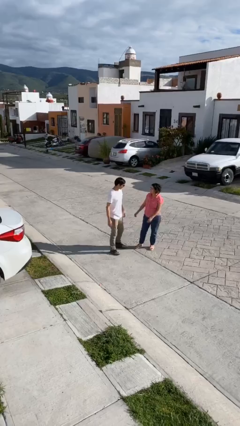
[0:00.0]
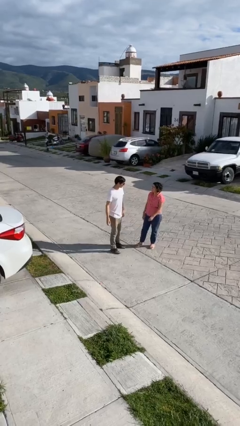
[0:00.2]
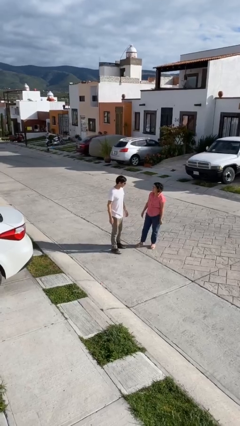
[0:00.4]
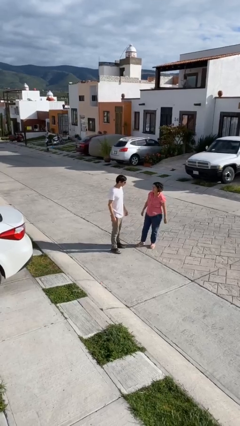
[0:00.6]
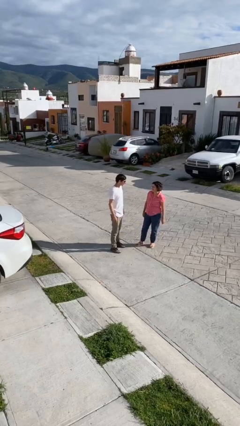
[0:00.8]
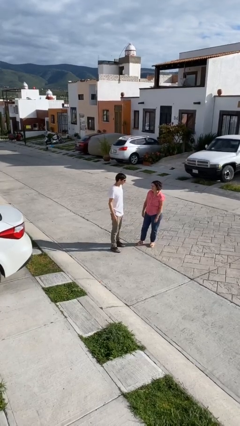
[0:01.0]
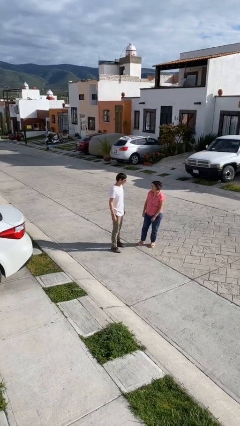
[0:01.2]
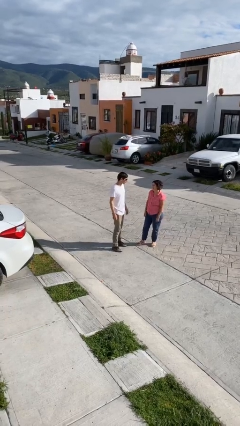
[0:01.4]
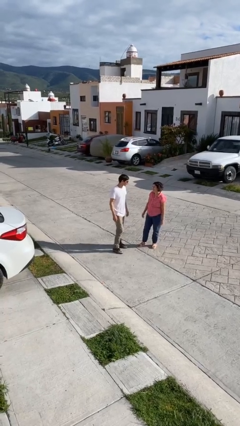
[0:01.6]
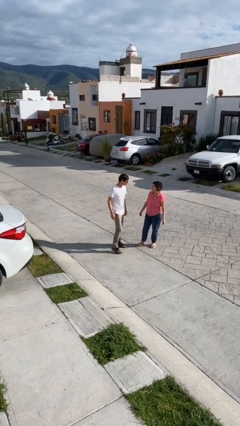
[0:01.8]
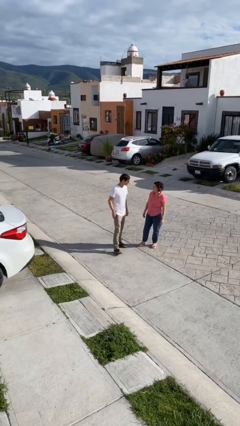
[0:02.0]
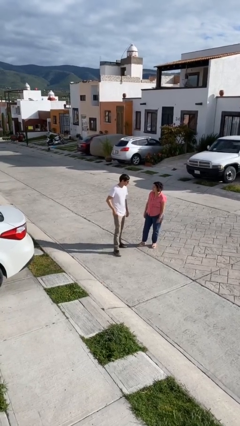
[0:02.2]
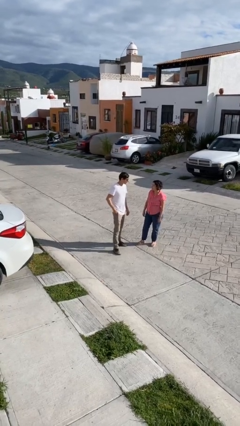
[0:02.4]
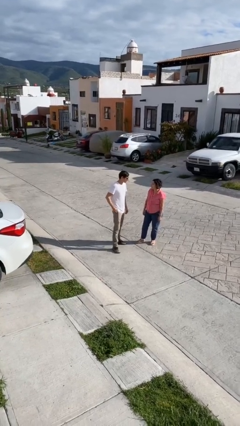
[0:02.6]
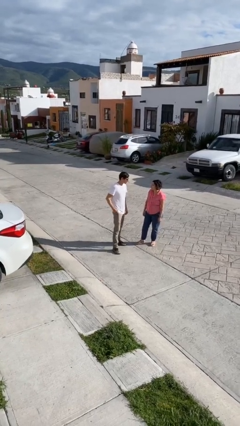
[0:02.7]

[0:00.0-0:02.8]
person talks to person

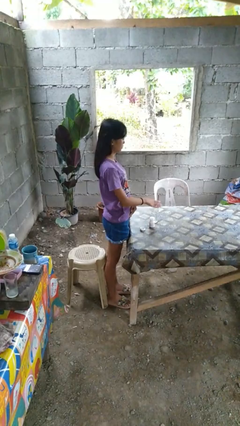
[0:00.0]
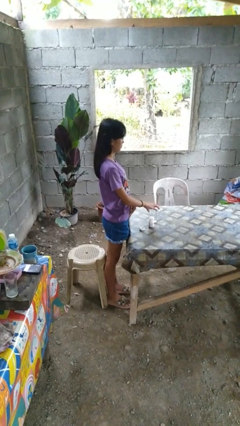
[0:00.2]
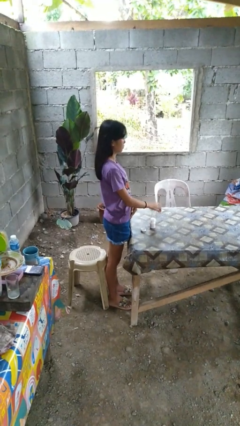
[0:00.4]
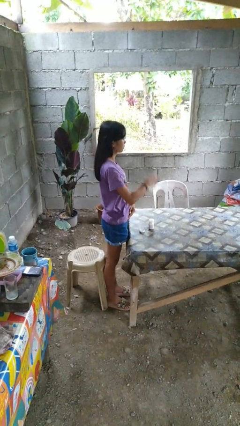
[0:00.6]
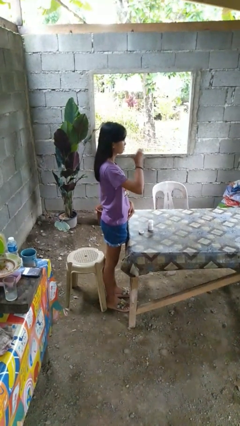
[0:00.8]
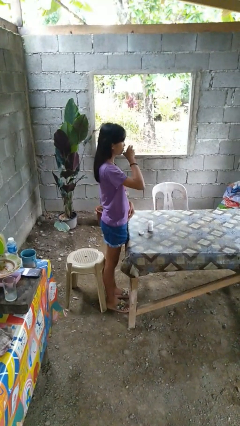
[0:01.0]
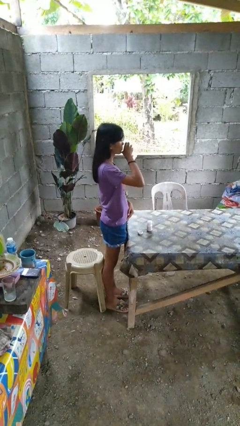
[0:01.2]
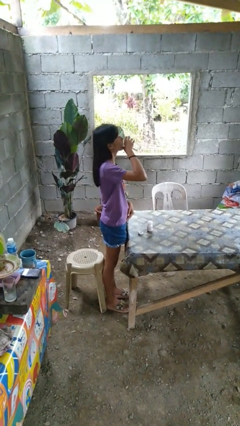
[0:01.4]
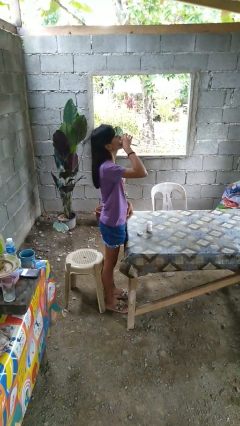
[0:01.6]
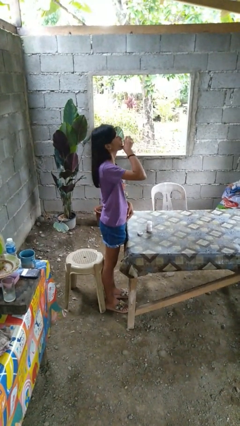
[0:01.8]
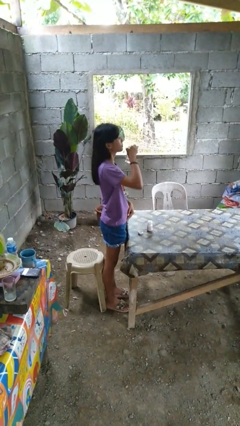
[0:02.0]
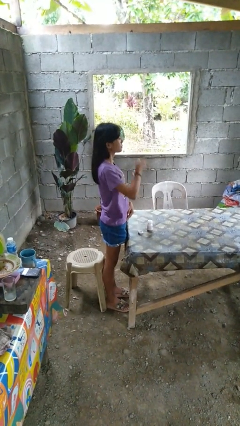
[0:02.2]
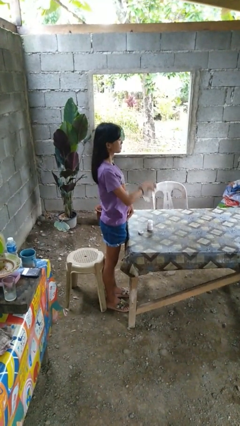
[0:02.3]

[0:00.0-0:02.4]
person drinks from cup

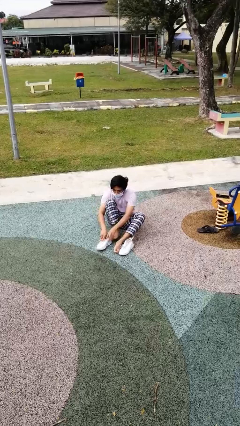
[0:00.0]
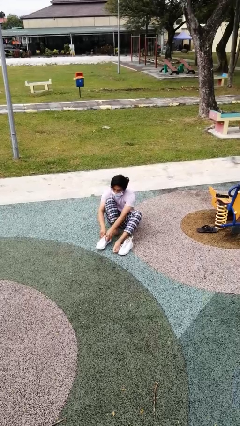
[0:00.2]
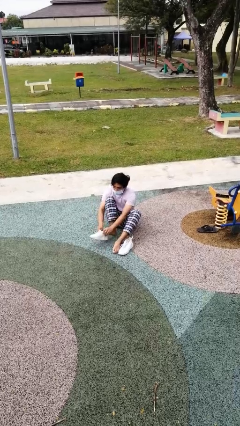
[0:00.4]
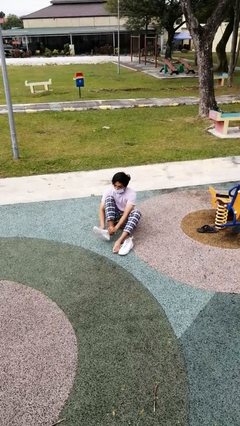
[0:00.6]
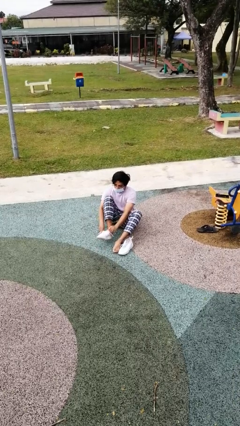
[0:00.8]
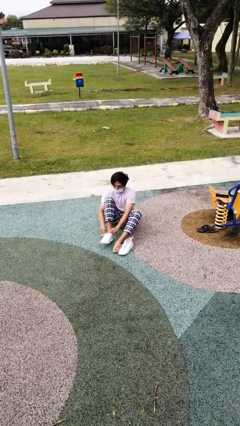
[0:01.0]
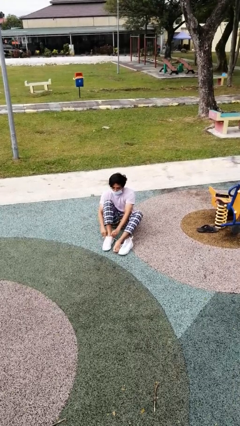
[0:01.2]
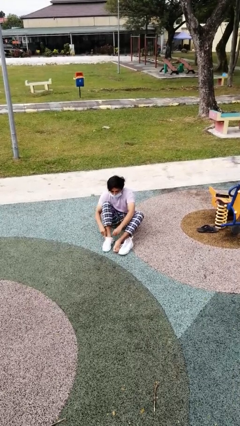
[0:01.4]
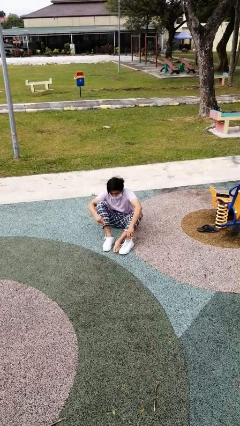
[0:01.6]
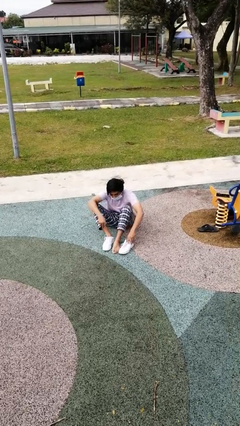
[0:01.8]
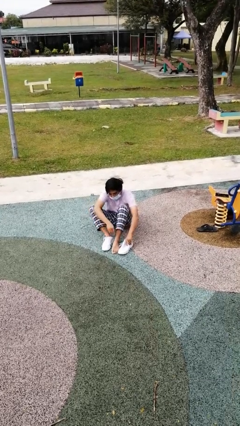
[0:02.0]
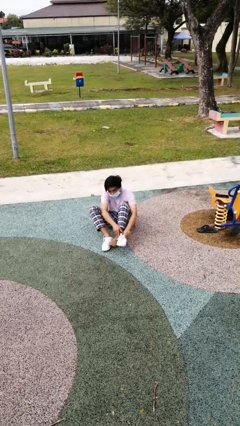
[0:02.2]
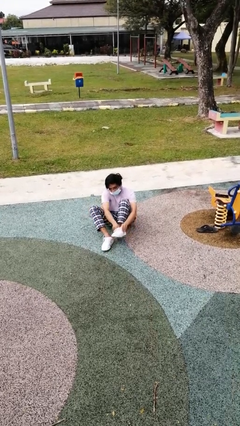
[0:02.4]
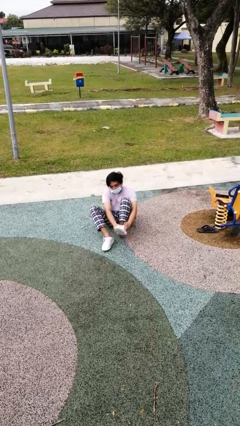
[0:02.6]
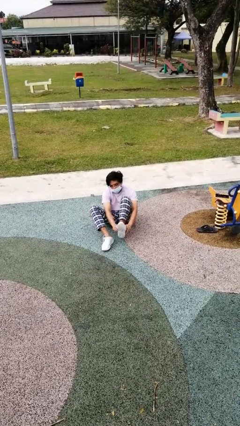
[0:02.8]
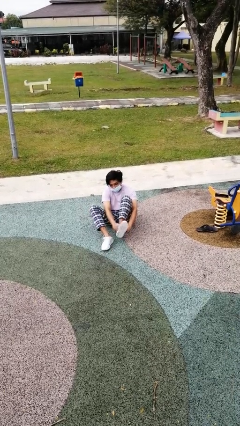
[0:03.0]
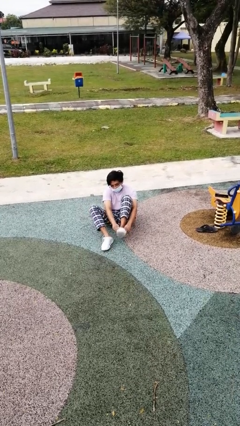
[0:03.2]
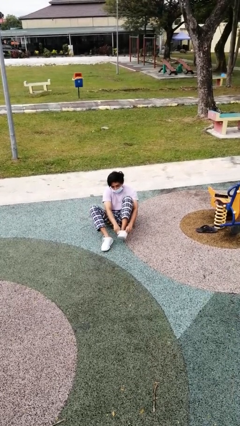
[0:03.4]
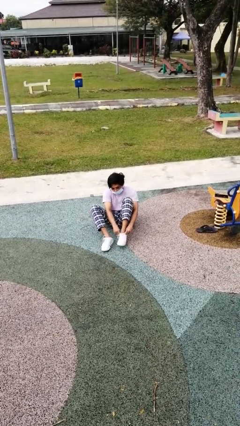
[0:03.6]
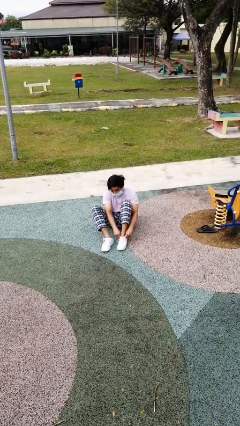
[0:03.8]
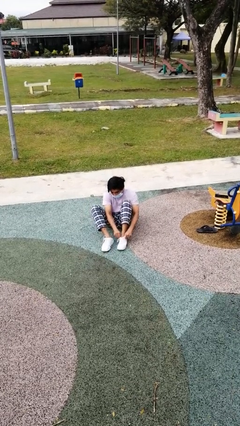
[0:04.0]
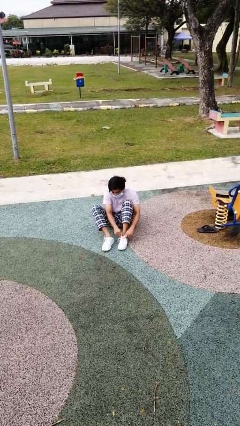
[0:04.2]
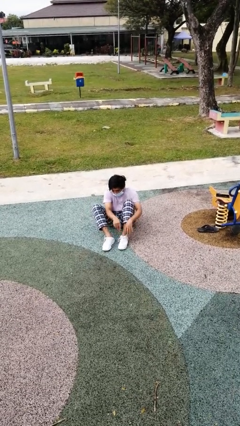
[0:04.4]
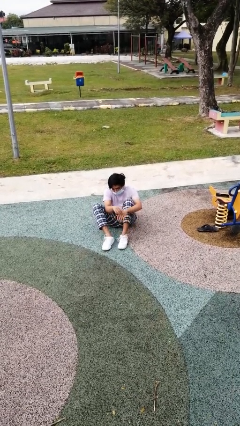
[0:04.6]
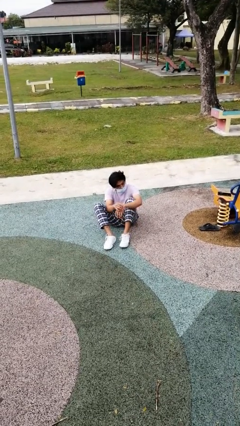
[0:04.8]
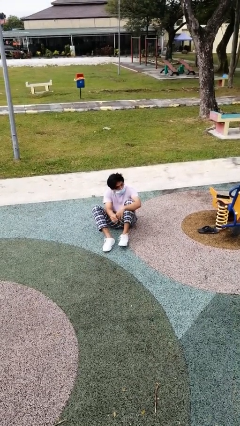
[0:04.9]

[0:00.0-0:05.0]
person puts on shoes

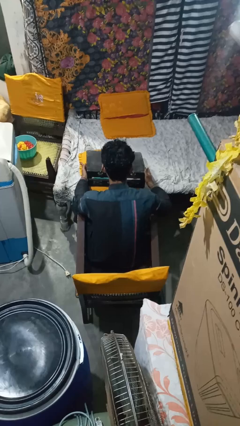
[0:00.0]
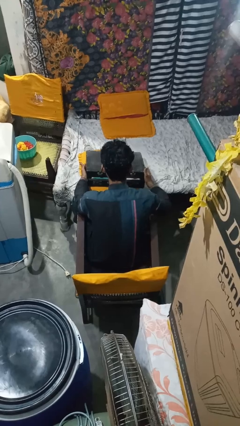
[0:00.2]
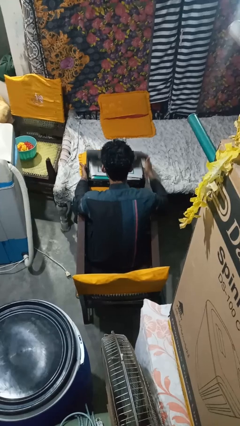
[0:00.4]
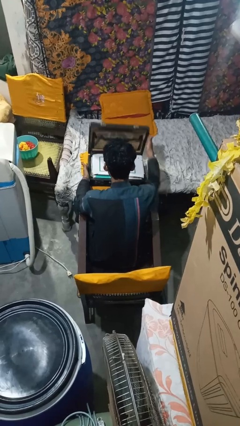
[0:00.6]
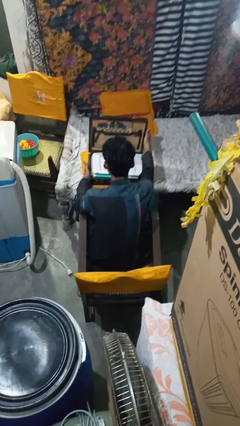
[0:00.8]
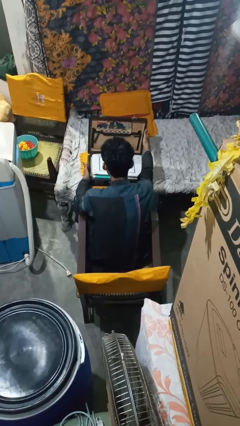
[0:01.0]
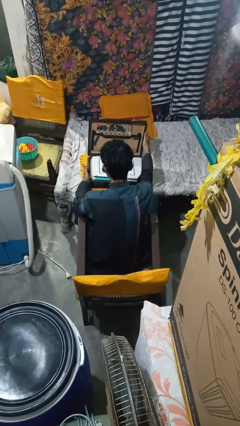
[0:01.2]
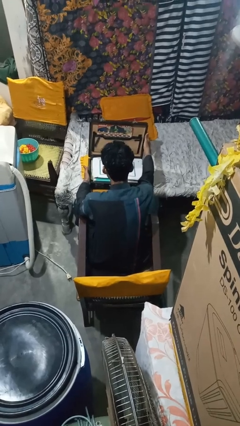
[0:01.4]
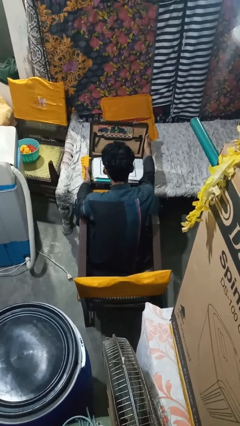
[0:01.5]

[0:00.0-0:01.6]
person opens suitcase

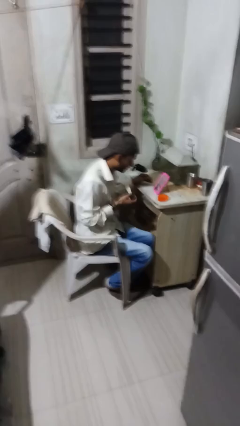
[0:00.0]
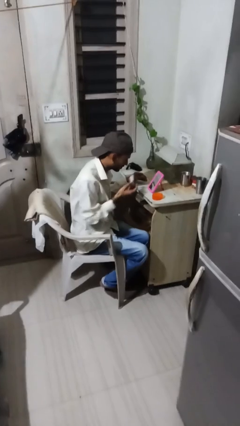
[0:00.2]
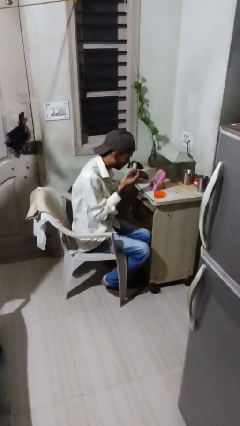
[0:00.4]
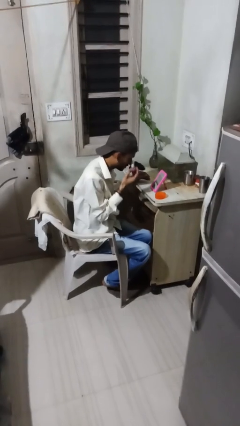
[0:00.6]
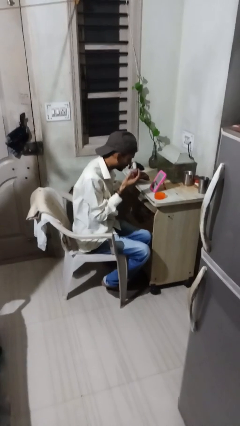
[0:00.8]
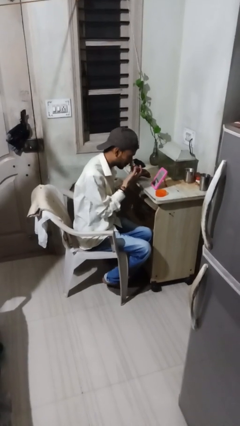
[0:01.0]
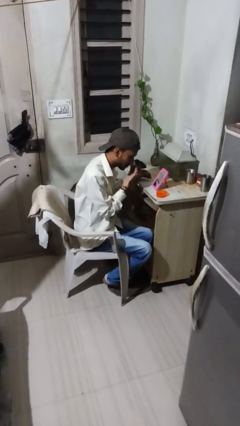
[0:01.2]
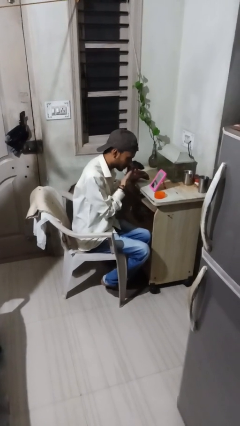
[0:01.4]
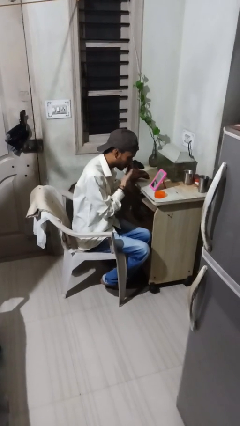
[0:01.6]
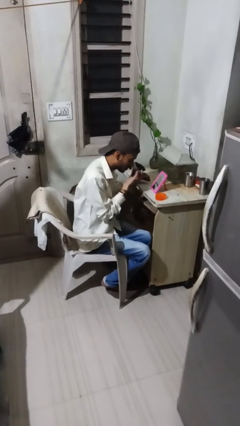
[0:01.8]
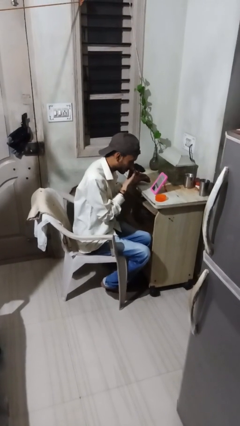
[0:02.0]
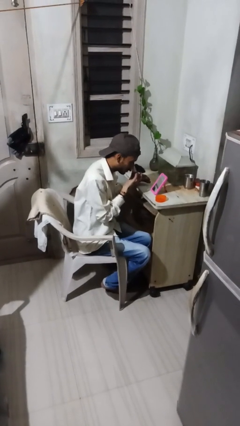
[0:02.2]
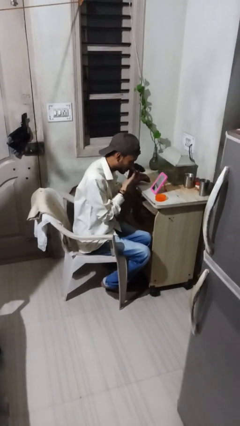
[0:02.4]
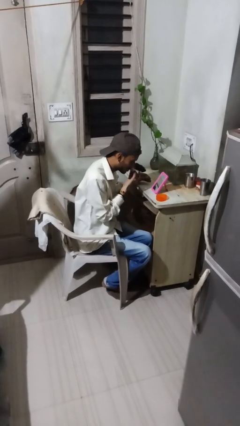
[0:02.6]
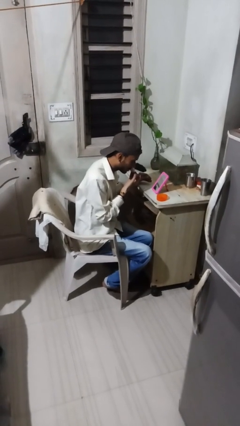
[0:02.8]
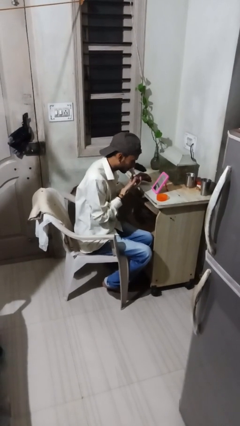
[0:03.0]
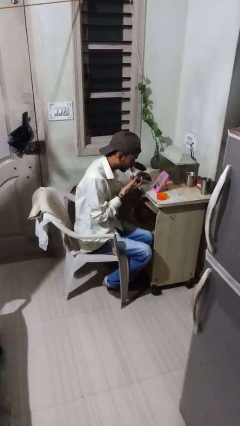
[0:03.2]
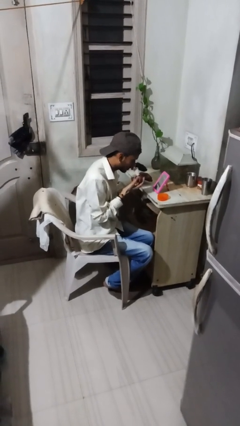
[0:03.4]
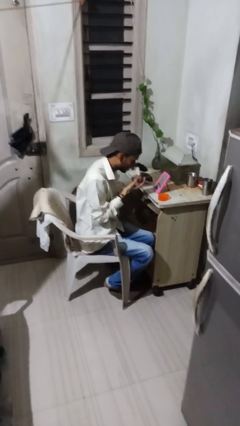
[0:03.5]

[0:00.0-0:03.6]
person applies foundation makeup

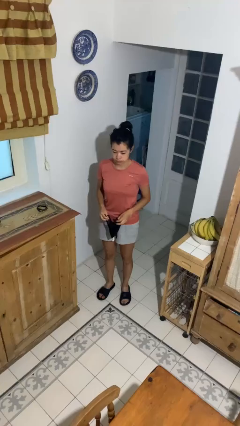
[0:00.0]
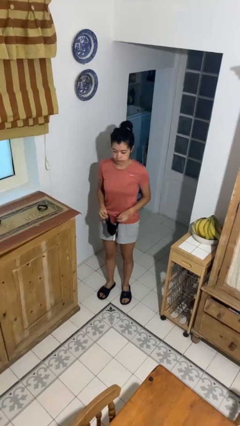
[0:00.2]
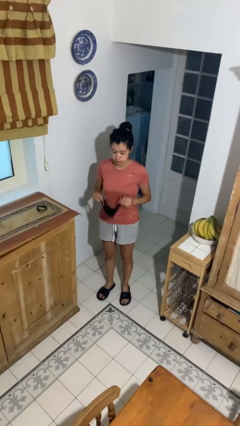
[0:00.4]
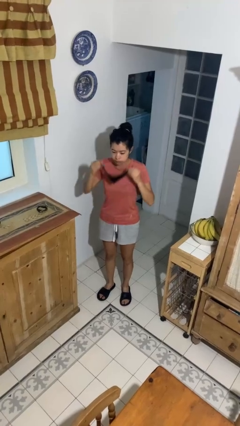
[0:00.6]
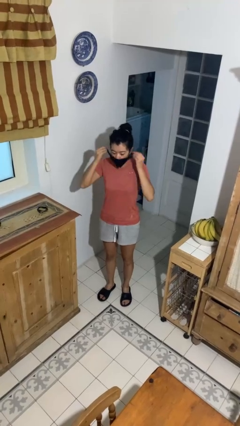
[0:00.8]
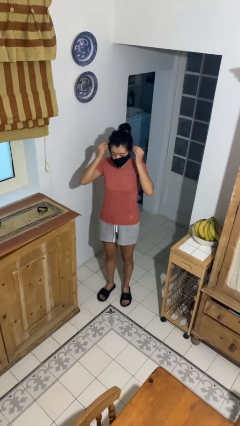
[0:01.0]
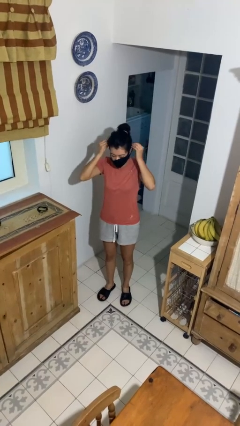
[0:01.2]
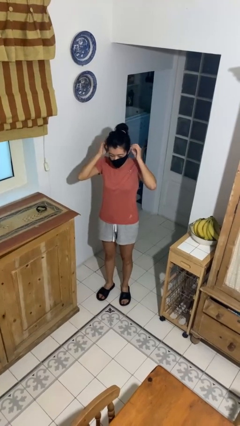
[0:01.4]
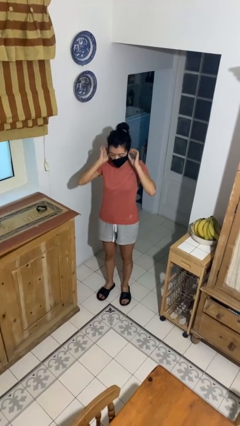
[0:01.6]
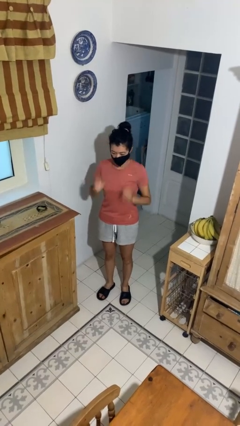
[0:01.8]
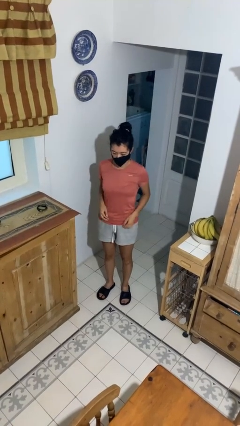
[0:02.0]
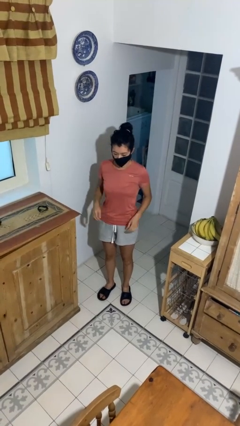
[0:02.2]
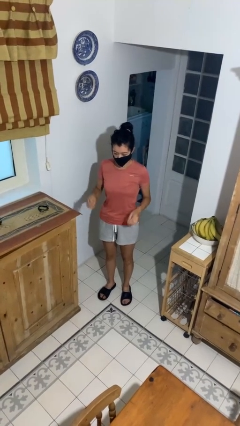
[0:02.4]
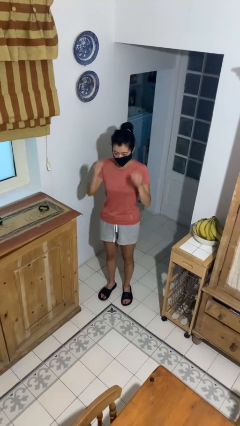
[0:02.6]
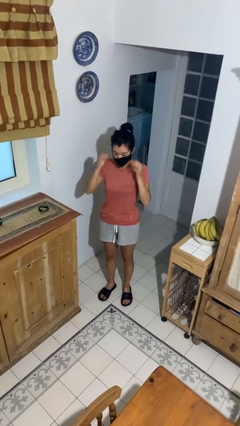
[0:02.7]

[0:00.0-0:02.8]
person puts on facemask
